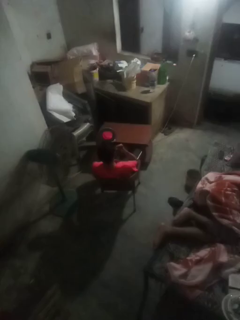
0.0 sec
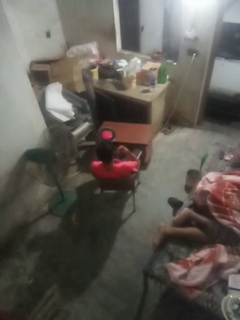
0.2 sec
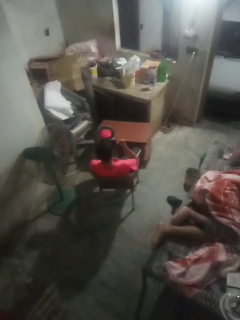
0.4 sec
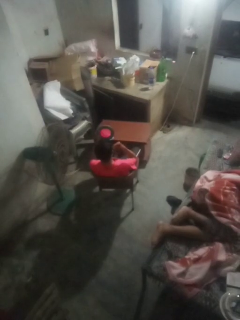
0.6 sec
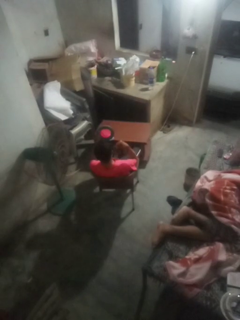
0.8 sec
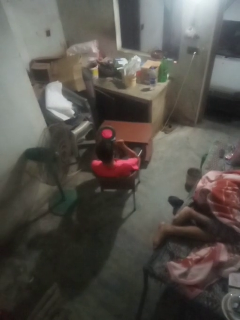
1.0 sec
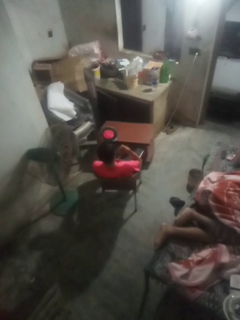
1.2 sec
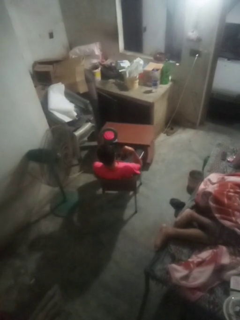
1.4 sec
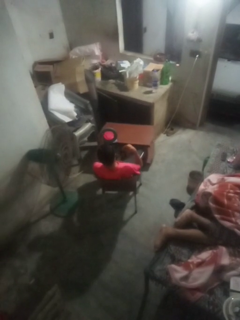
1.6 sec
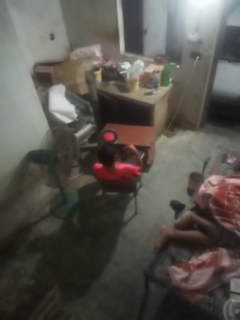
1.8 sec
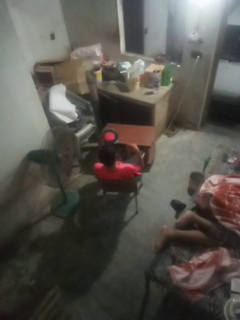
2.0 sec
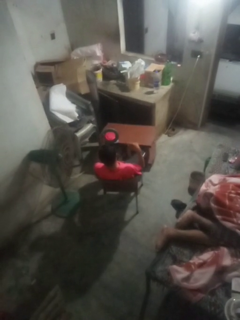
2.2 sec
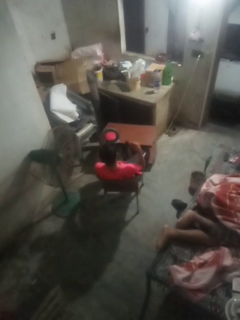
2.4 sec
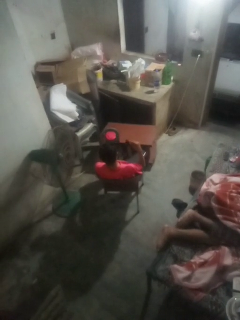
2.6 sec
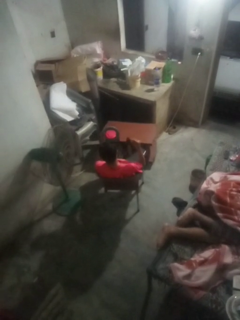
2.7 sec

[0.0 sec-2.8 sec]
person applies foundation makeup

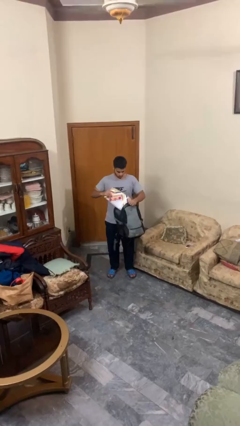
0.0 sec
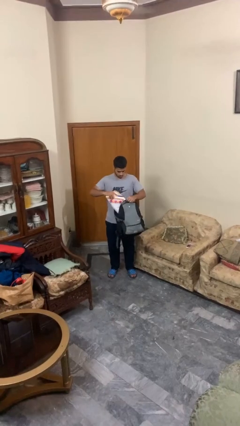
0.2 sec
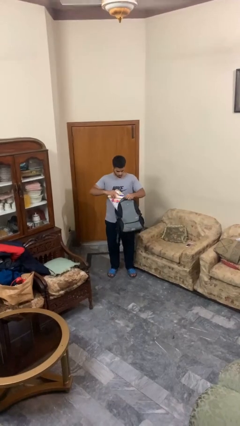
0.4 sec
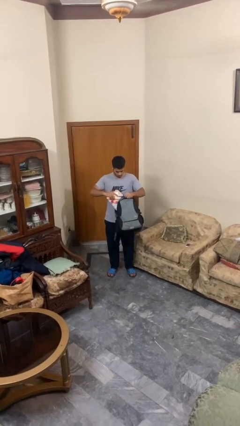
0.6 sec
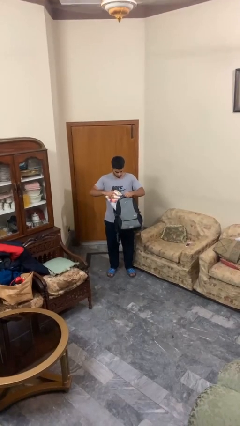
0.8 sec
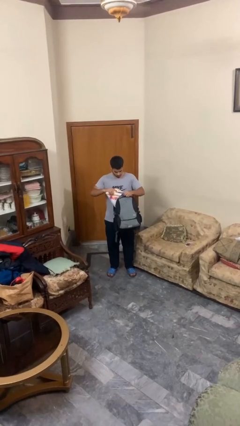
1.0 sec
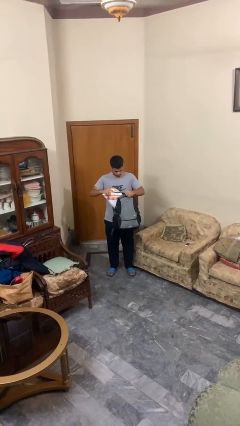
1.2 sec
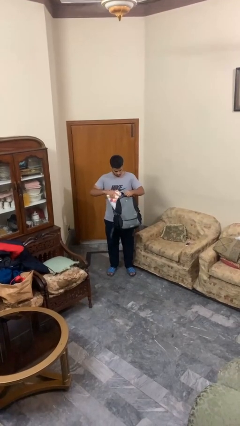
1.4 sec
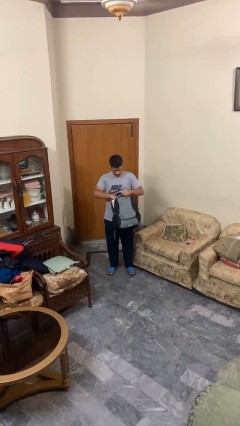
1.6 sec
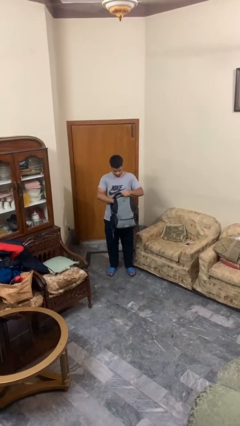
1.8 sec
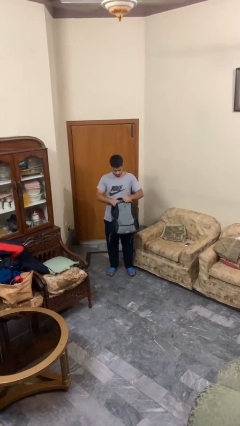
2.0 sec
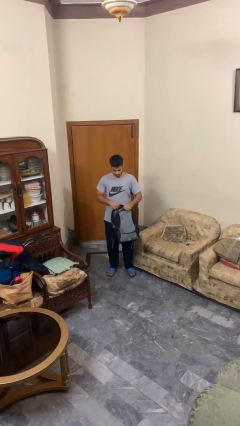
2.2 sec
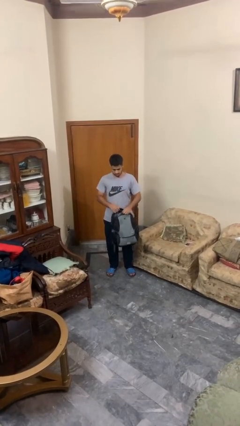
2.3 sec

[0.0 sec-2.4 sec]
person puts object into backpack

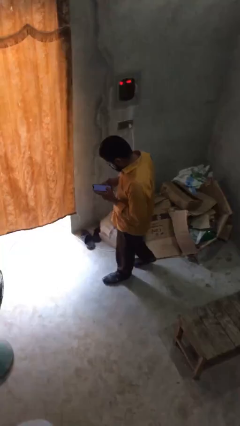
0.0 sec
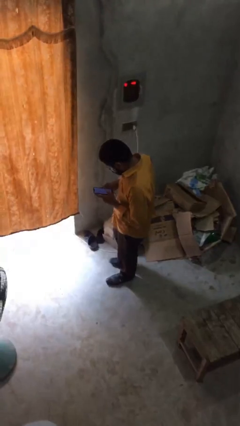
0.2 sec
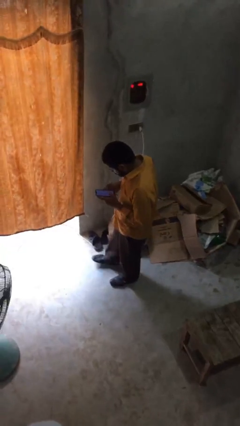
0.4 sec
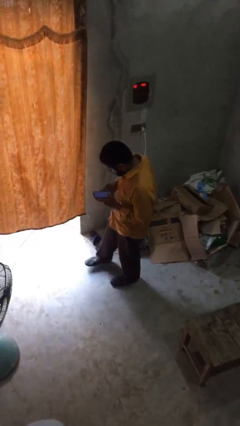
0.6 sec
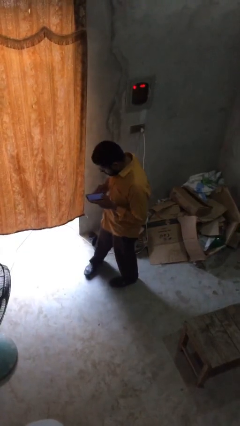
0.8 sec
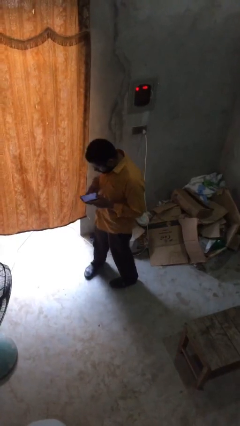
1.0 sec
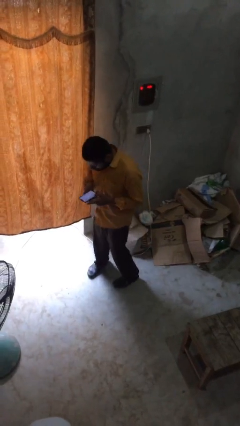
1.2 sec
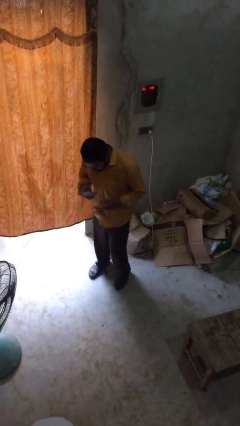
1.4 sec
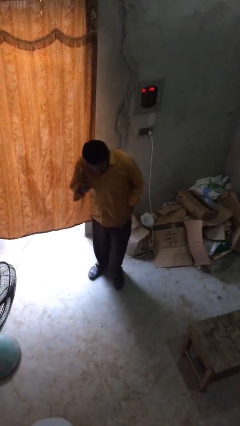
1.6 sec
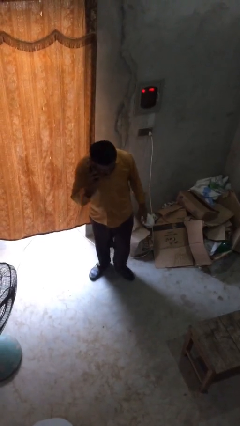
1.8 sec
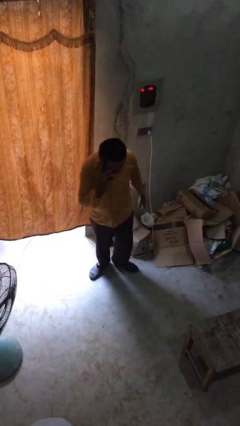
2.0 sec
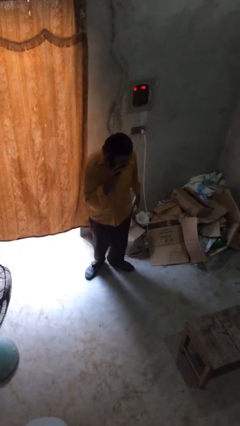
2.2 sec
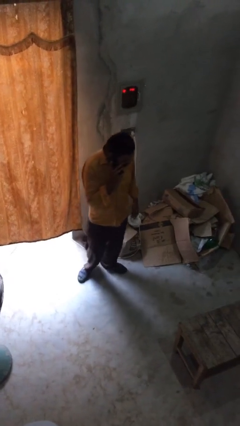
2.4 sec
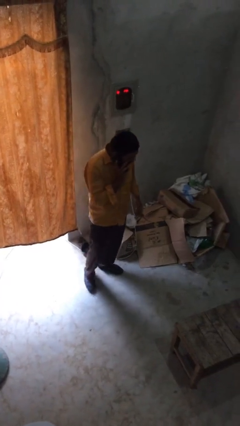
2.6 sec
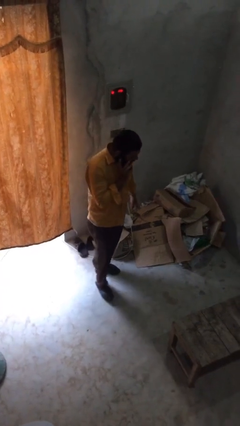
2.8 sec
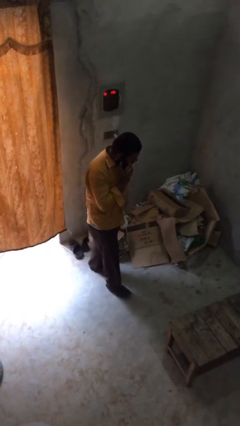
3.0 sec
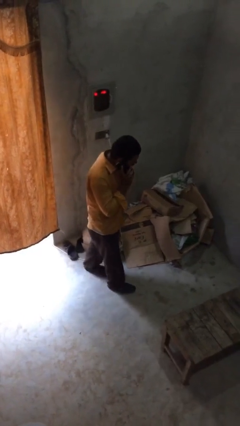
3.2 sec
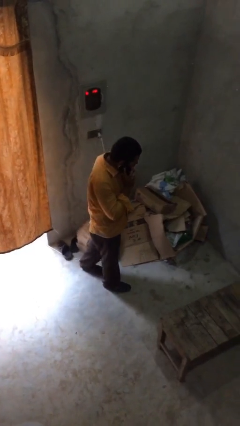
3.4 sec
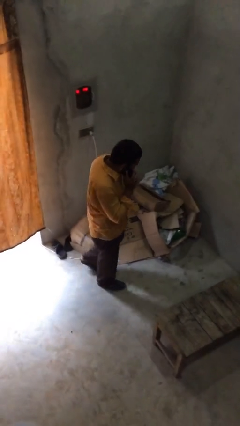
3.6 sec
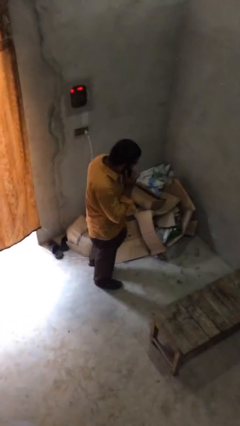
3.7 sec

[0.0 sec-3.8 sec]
person talks on phone

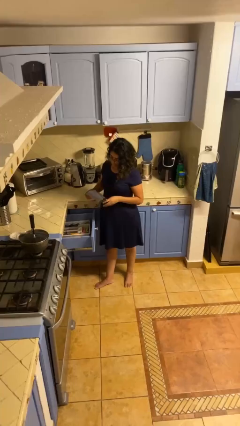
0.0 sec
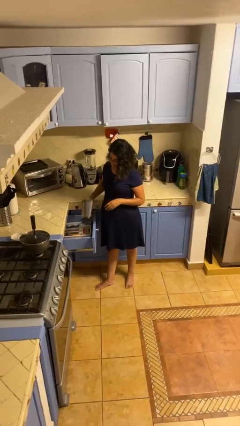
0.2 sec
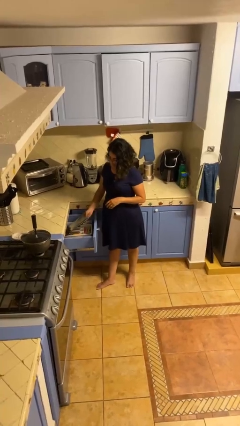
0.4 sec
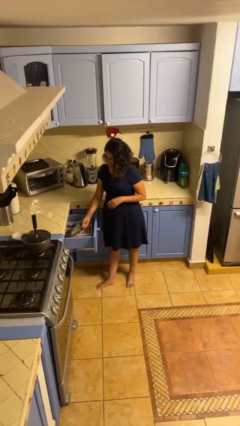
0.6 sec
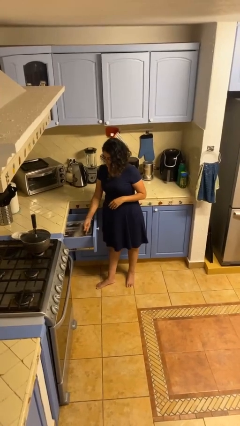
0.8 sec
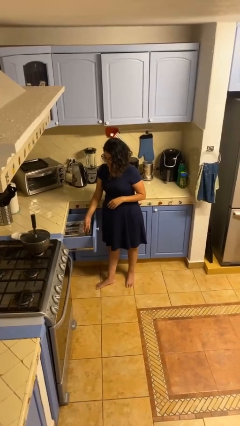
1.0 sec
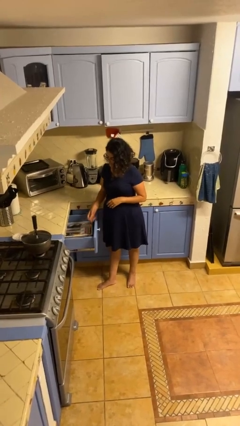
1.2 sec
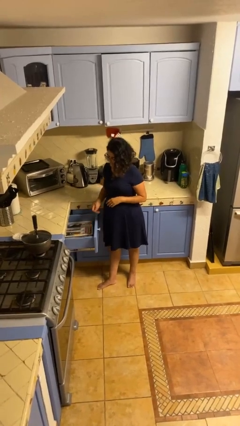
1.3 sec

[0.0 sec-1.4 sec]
person puts object into kitchen drawer

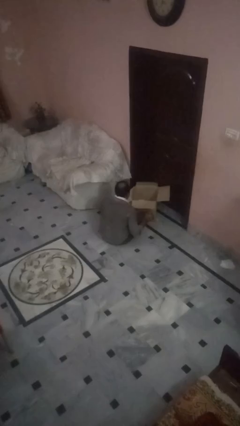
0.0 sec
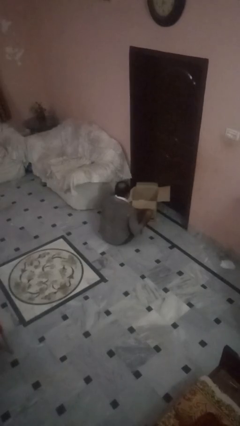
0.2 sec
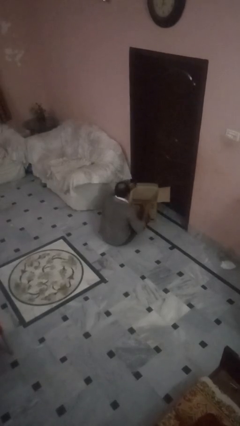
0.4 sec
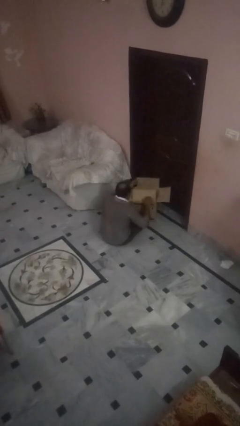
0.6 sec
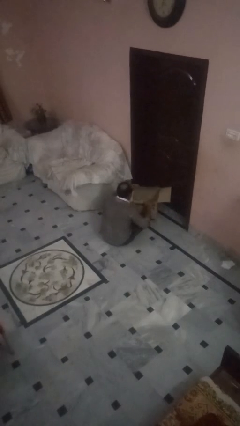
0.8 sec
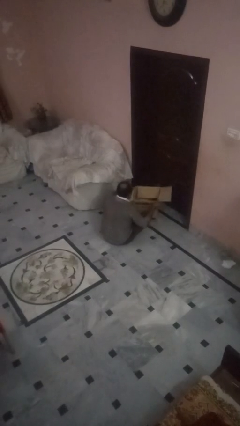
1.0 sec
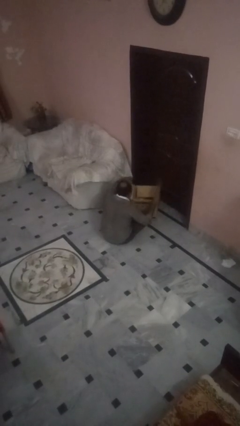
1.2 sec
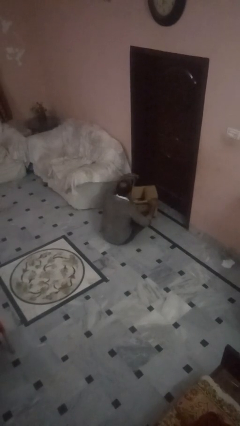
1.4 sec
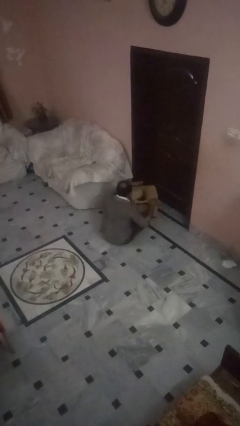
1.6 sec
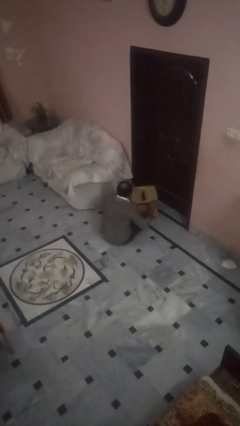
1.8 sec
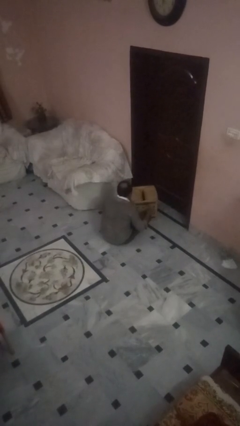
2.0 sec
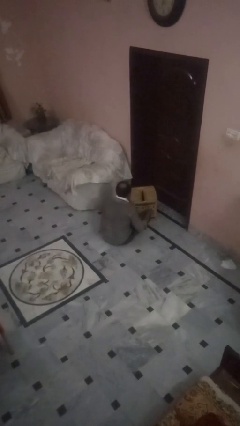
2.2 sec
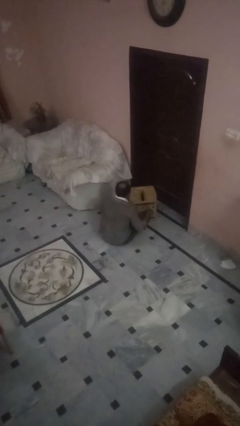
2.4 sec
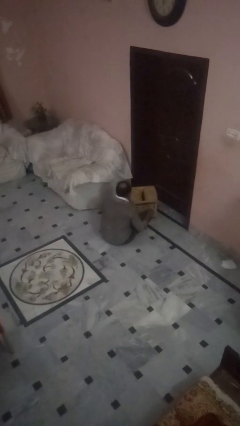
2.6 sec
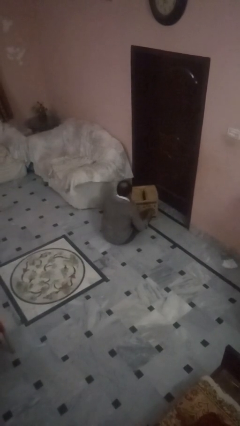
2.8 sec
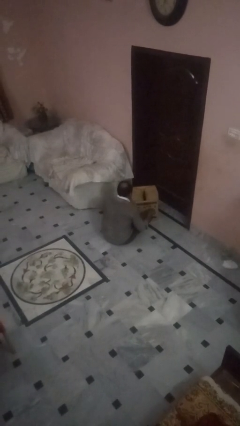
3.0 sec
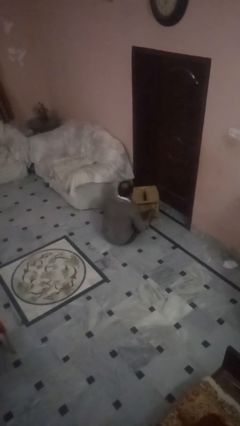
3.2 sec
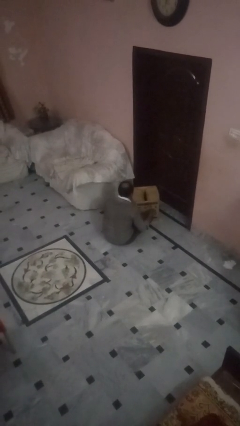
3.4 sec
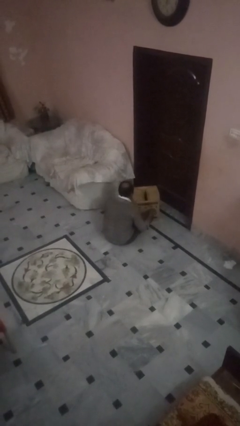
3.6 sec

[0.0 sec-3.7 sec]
person closes box

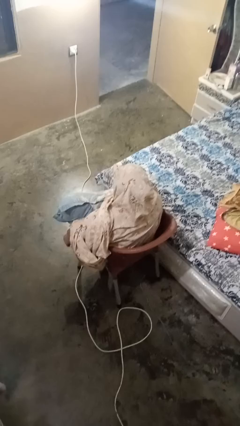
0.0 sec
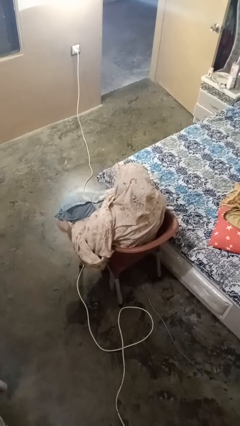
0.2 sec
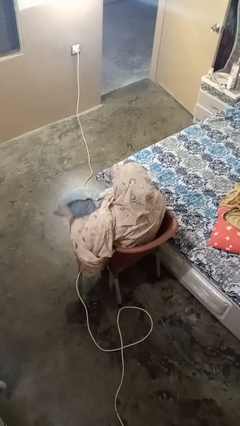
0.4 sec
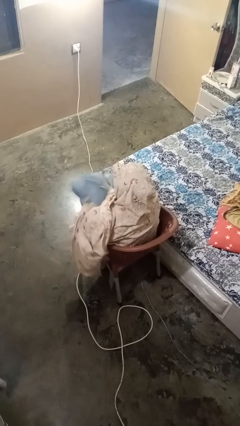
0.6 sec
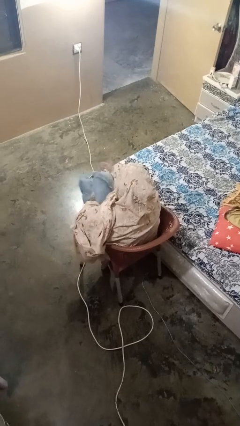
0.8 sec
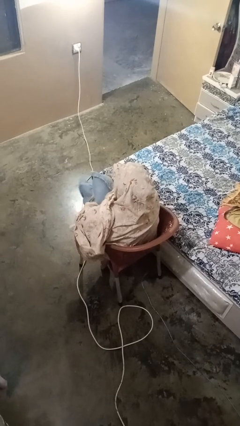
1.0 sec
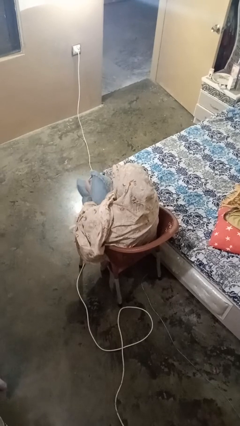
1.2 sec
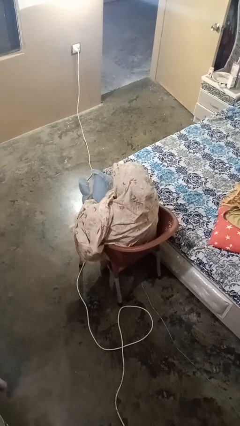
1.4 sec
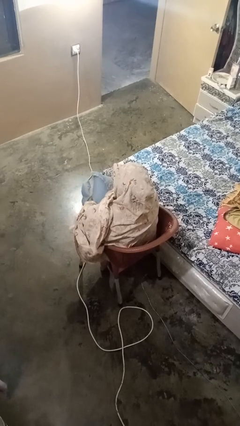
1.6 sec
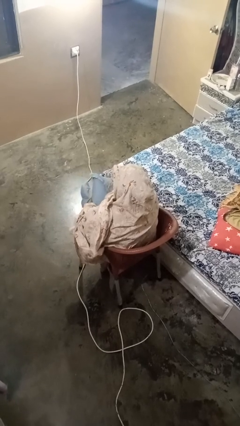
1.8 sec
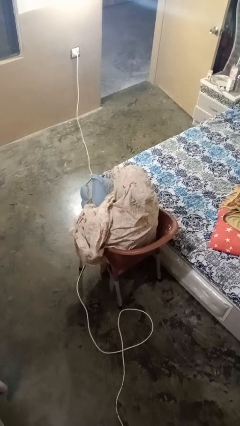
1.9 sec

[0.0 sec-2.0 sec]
person squeezes object

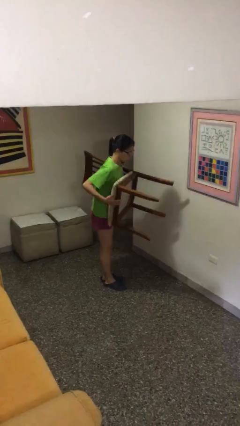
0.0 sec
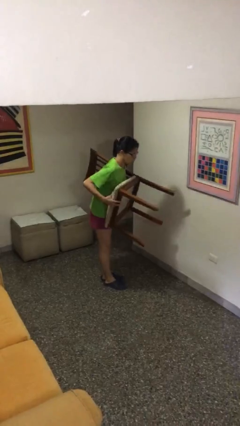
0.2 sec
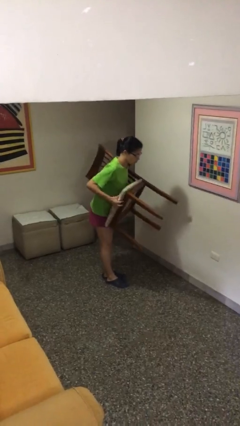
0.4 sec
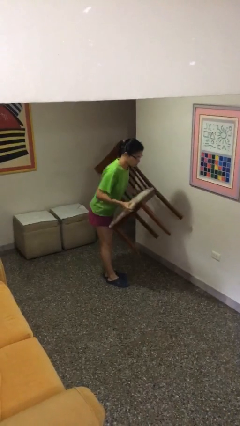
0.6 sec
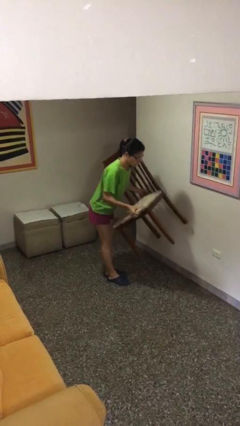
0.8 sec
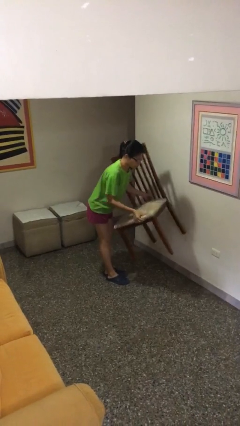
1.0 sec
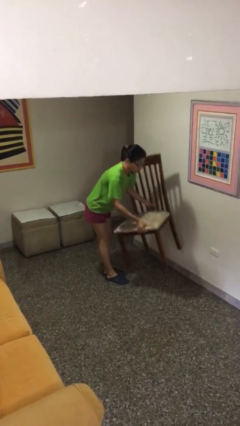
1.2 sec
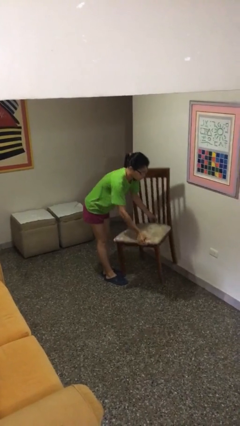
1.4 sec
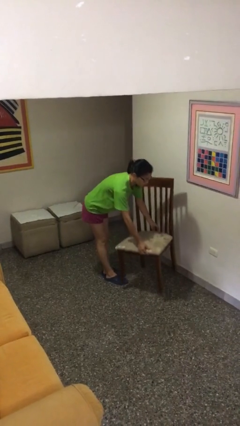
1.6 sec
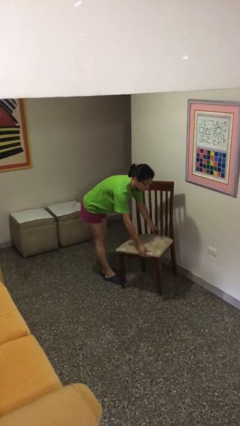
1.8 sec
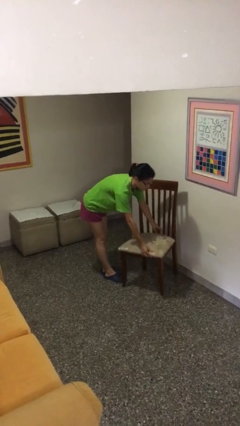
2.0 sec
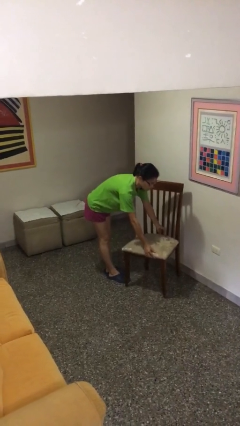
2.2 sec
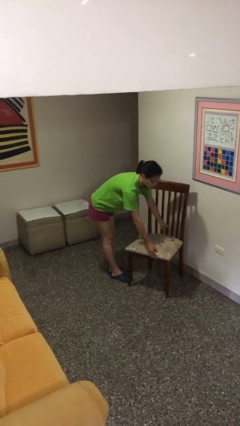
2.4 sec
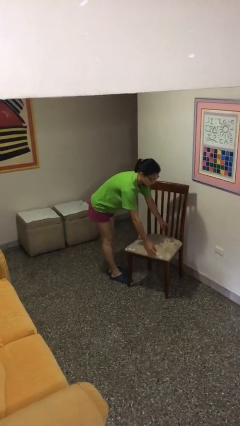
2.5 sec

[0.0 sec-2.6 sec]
person puts down object on floor
